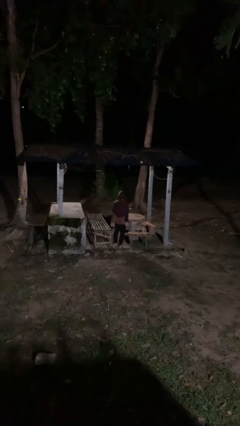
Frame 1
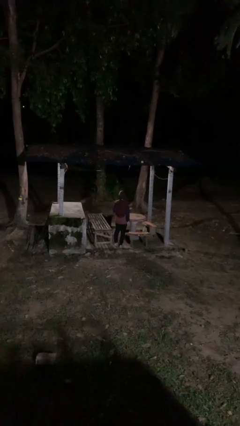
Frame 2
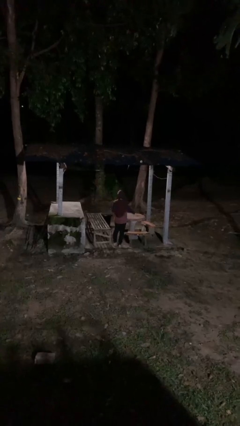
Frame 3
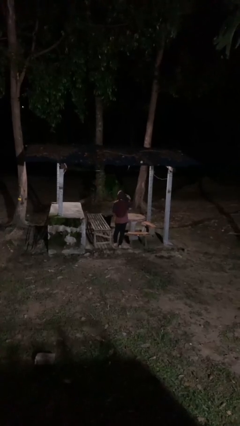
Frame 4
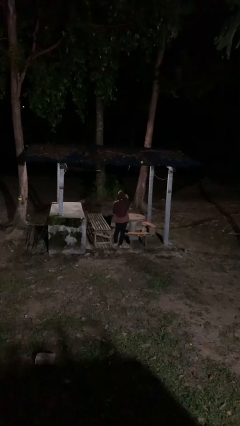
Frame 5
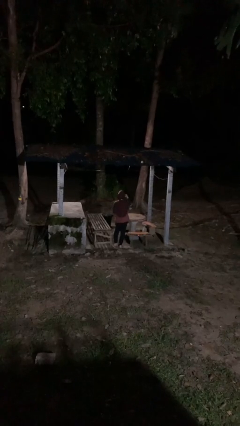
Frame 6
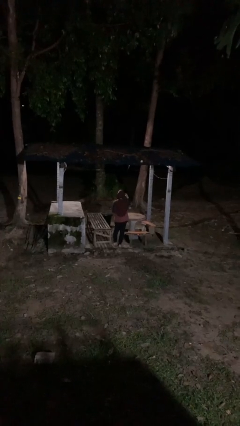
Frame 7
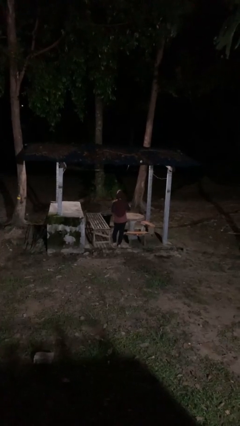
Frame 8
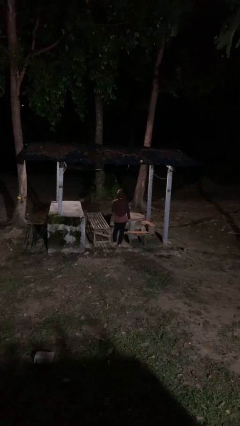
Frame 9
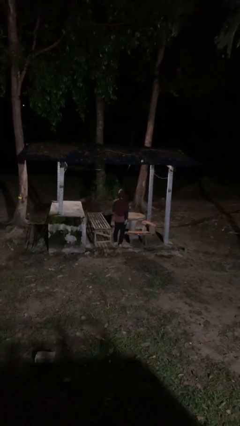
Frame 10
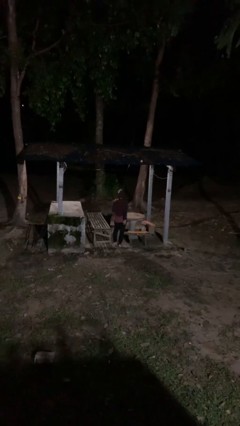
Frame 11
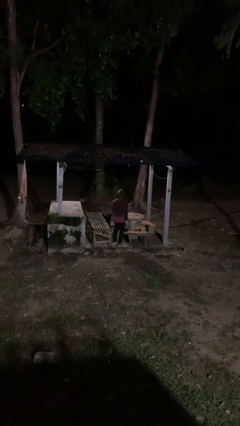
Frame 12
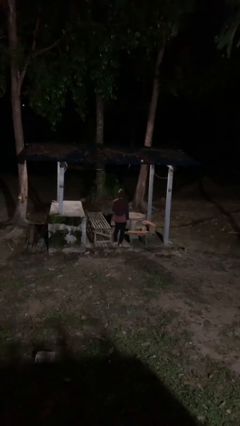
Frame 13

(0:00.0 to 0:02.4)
person gestures watch closely

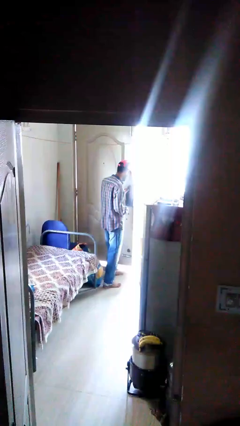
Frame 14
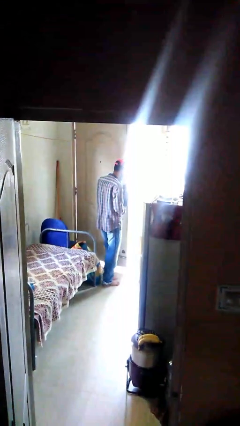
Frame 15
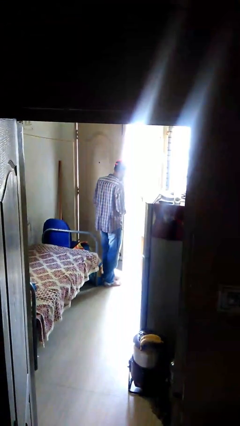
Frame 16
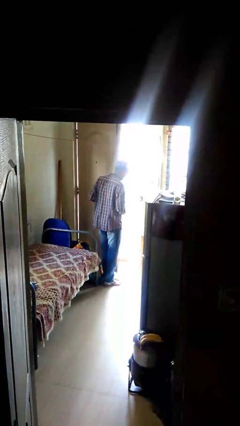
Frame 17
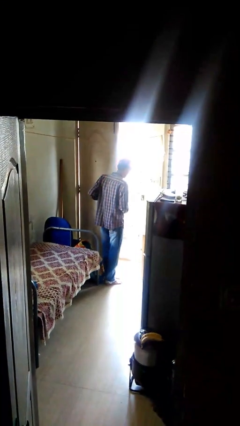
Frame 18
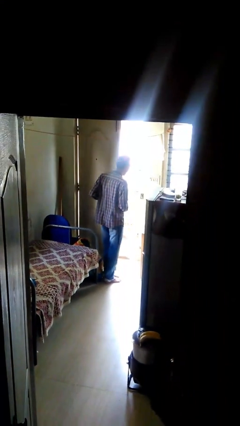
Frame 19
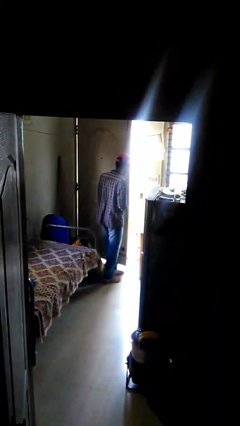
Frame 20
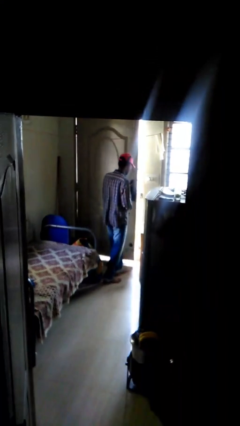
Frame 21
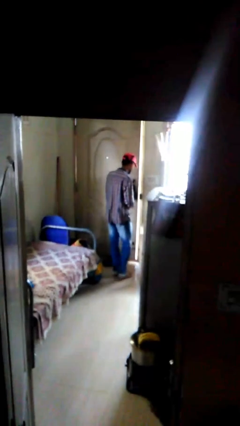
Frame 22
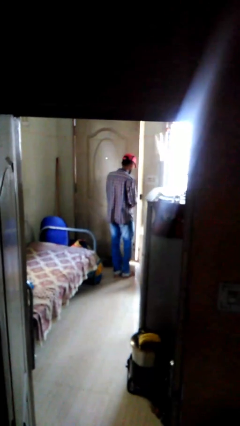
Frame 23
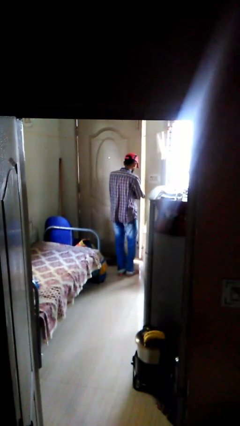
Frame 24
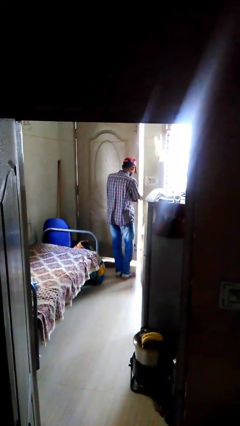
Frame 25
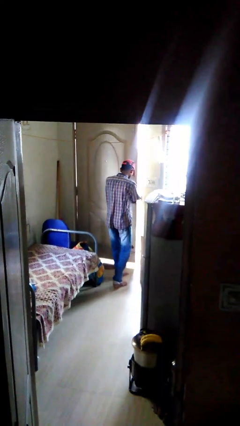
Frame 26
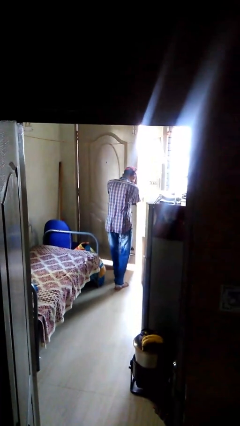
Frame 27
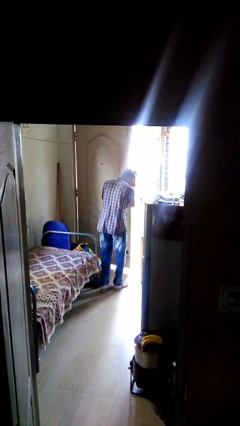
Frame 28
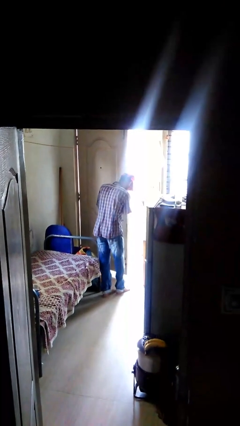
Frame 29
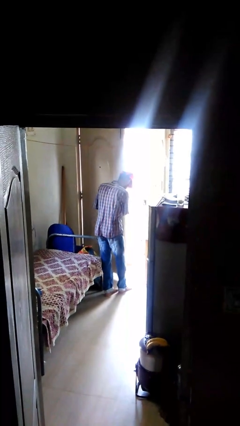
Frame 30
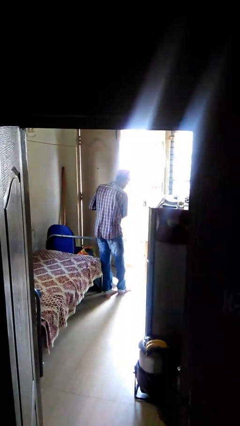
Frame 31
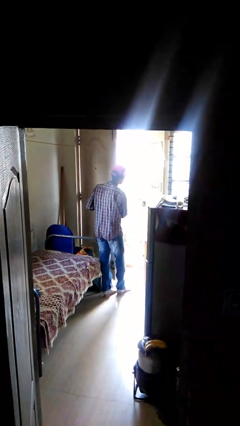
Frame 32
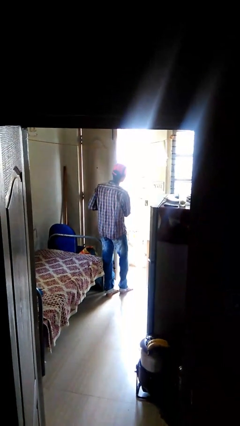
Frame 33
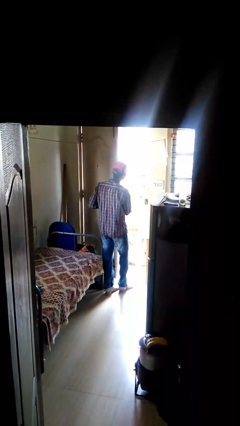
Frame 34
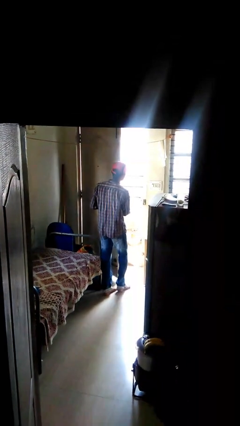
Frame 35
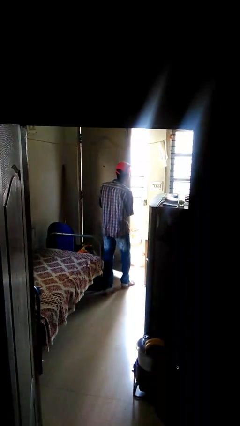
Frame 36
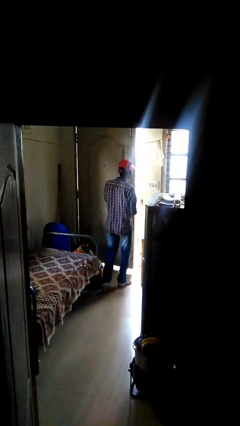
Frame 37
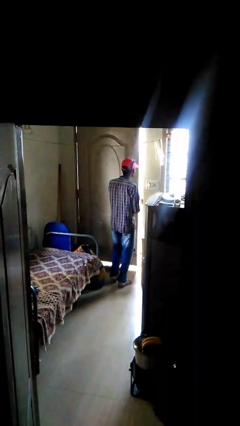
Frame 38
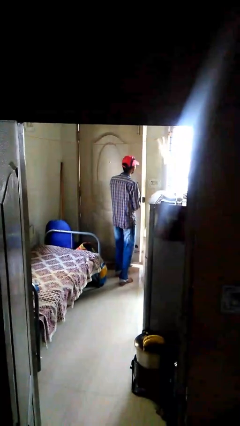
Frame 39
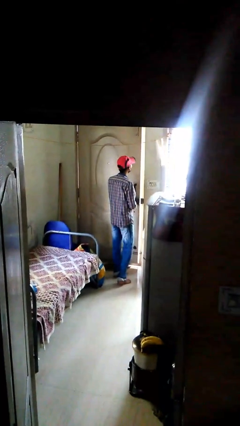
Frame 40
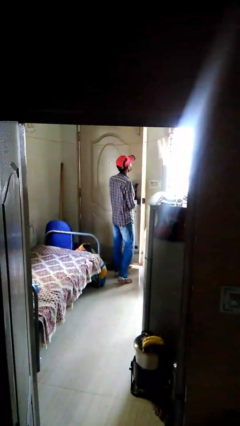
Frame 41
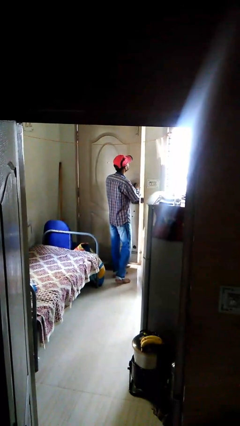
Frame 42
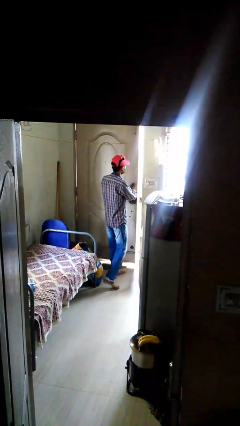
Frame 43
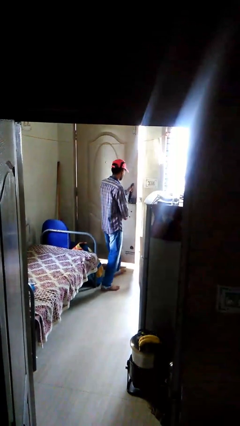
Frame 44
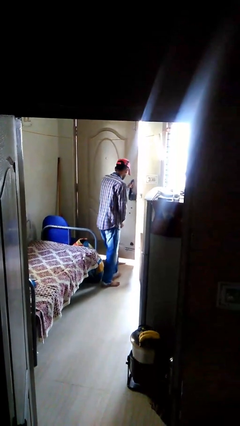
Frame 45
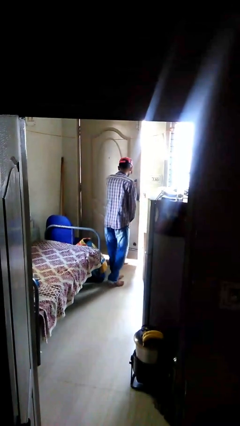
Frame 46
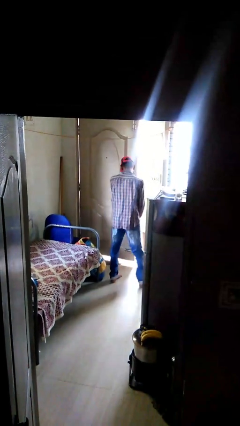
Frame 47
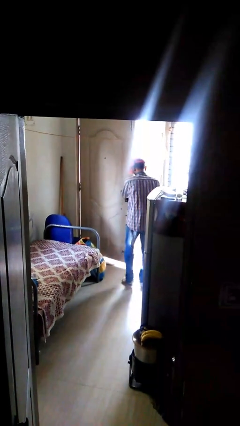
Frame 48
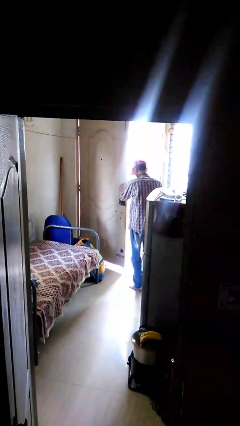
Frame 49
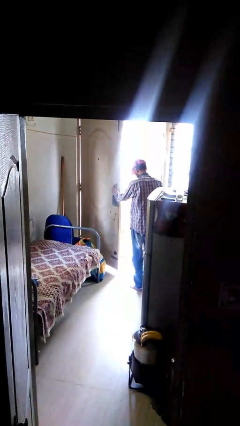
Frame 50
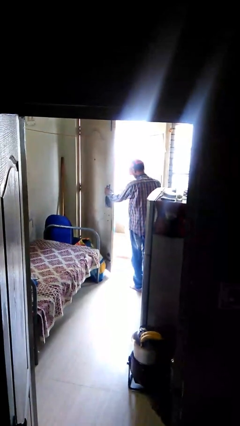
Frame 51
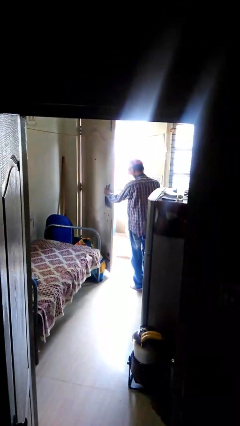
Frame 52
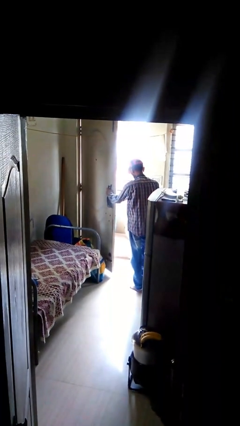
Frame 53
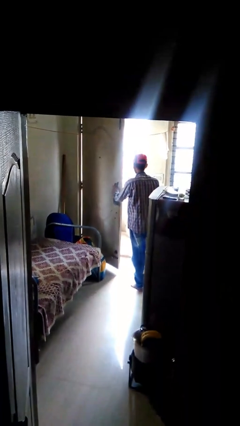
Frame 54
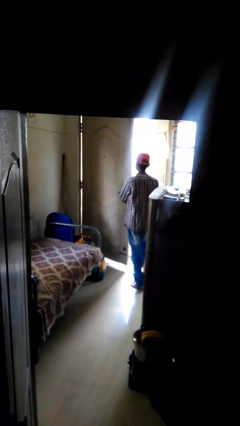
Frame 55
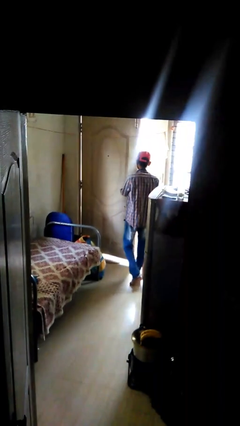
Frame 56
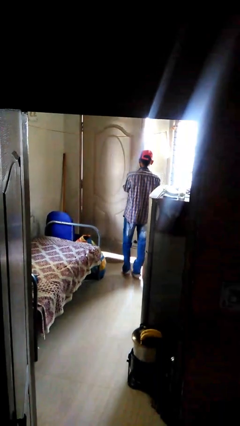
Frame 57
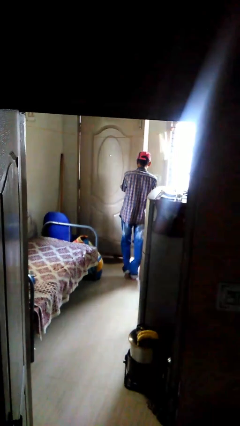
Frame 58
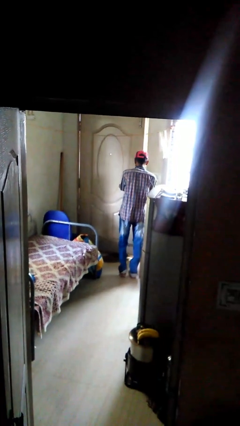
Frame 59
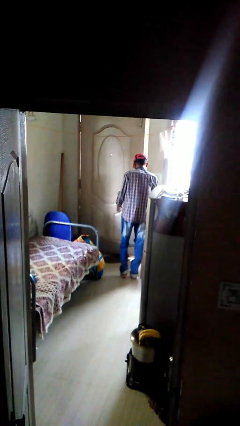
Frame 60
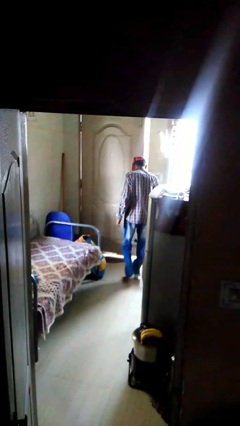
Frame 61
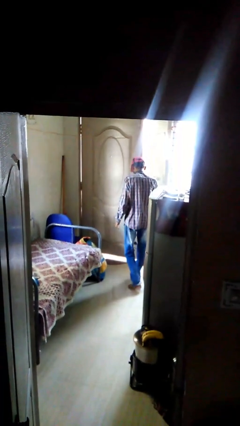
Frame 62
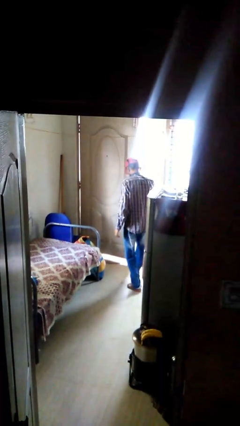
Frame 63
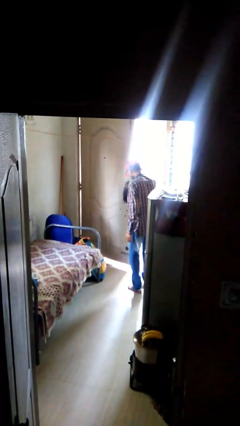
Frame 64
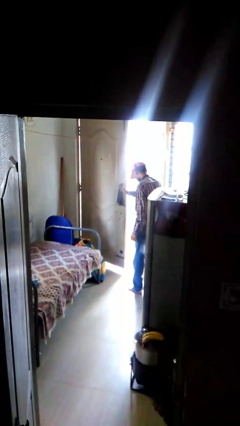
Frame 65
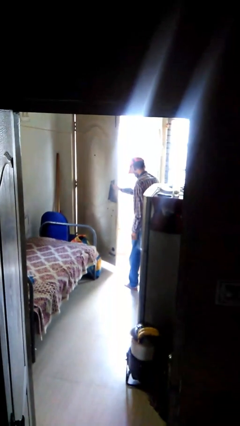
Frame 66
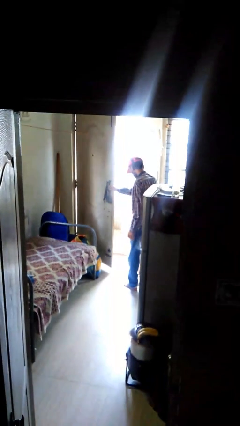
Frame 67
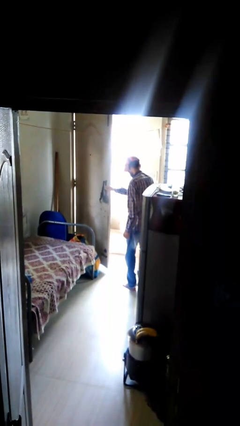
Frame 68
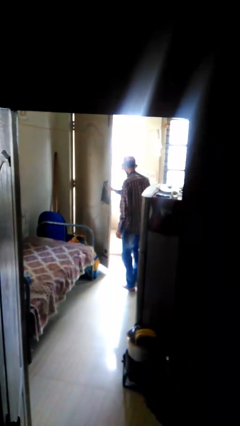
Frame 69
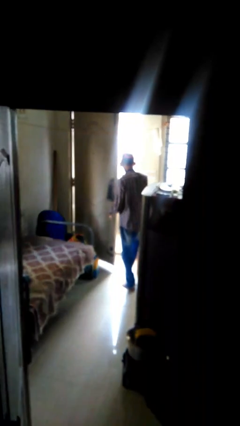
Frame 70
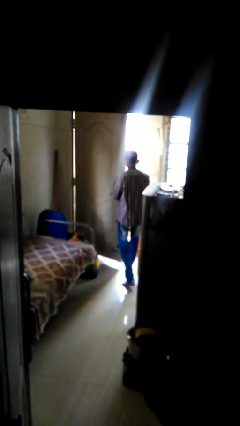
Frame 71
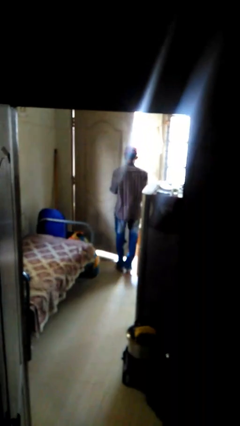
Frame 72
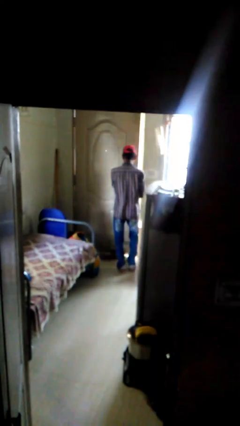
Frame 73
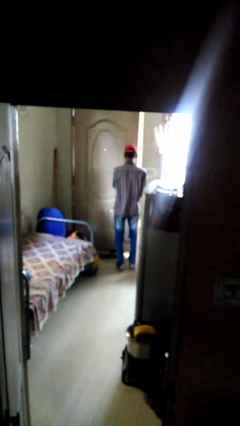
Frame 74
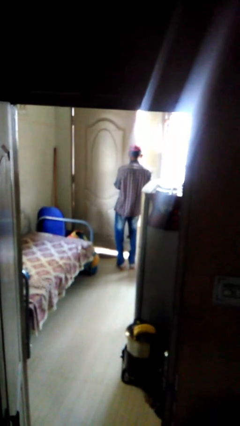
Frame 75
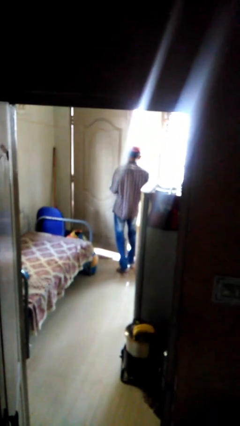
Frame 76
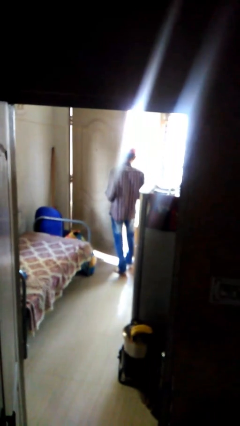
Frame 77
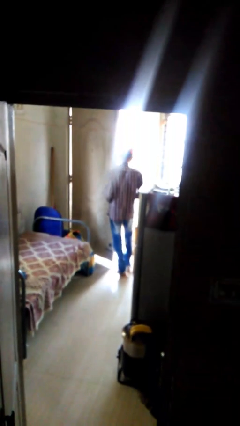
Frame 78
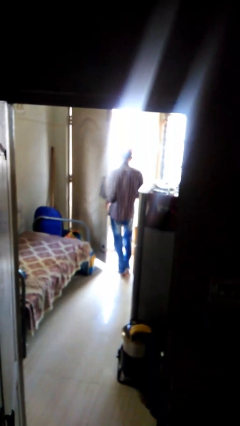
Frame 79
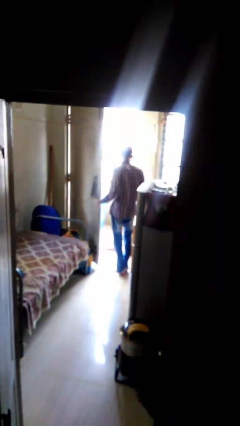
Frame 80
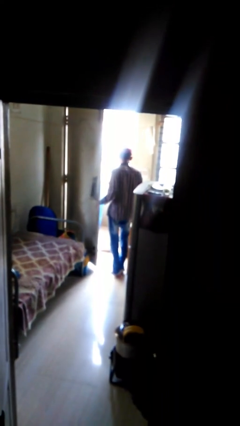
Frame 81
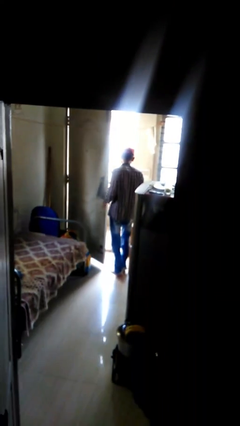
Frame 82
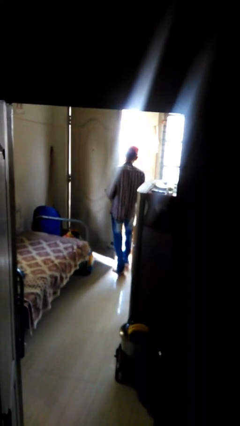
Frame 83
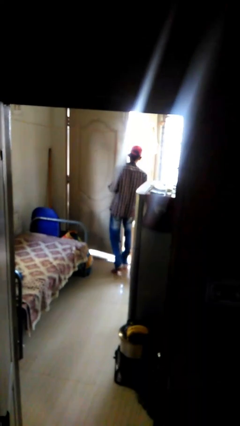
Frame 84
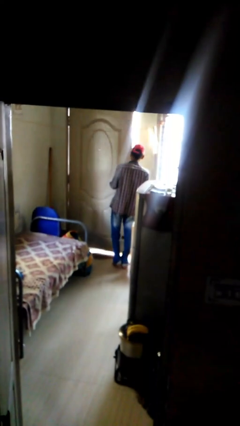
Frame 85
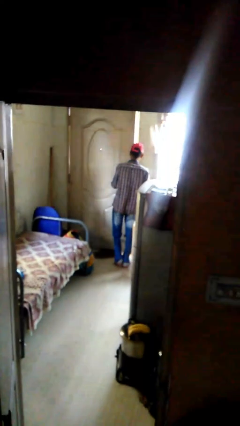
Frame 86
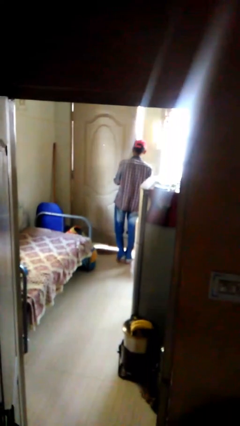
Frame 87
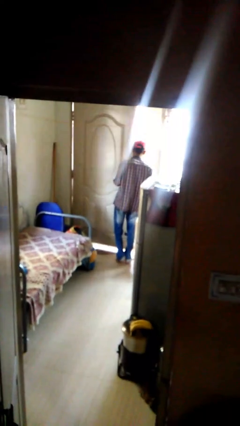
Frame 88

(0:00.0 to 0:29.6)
person opens facility door

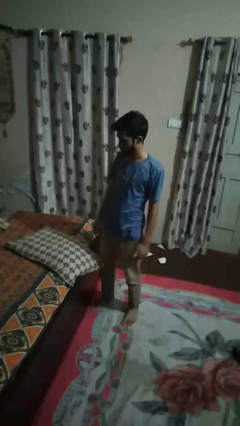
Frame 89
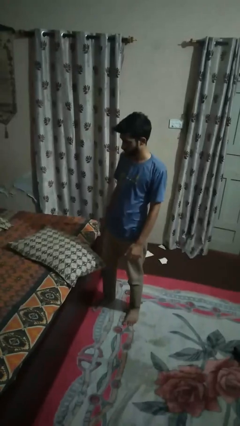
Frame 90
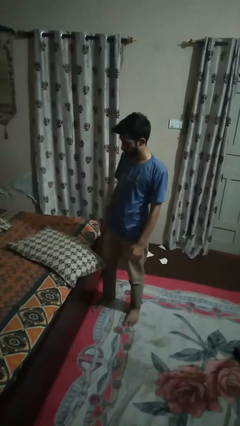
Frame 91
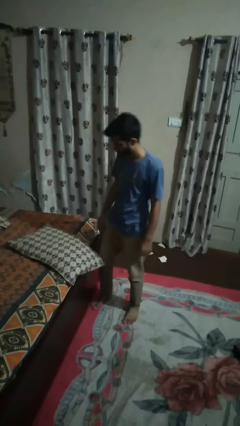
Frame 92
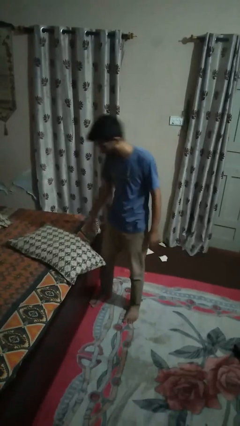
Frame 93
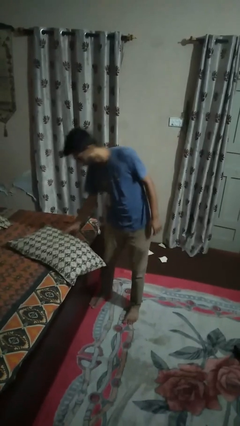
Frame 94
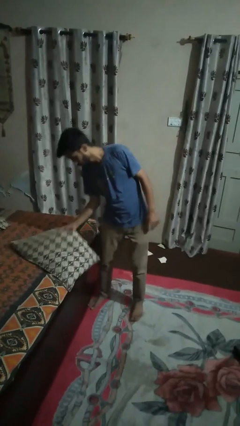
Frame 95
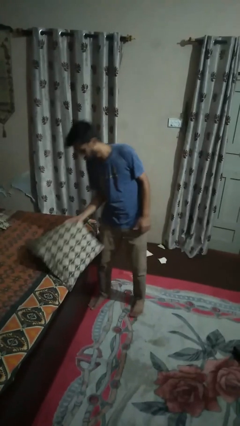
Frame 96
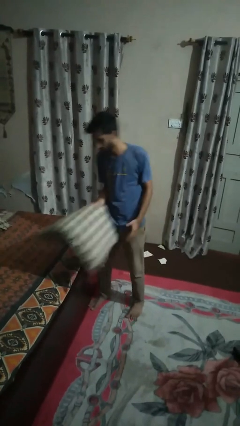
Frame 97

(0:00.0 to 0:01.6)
person picks up object from bed
